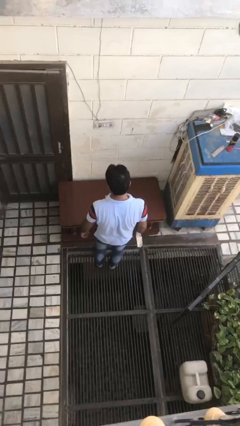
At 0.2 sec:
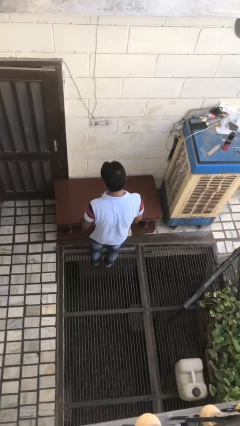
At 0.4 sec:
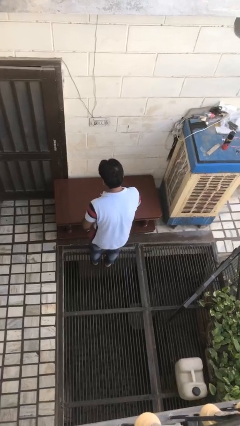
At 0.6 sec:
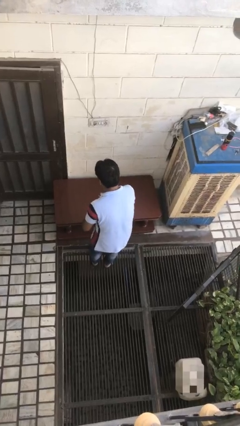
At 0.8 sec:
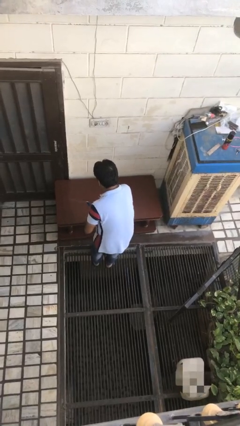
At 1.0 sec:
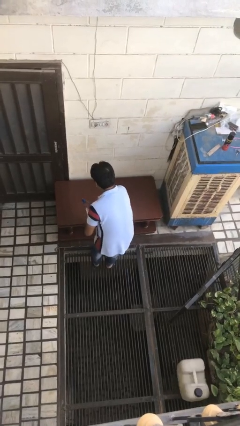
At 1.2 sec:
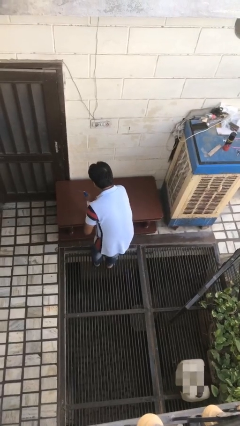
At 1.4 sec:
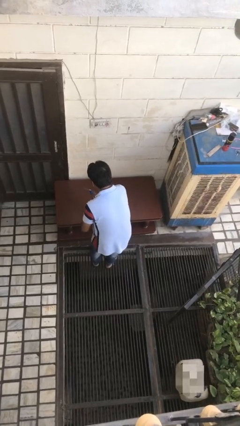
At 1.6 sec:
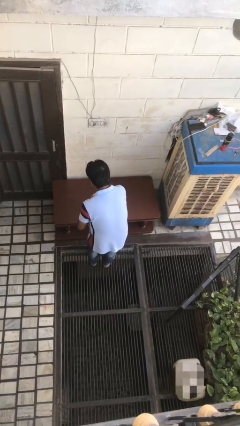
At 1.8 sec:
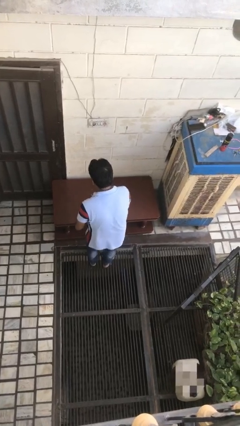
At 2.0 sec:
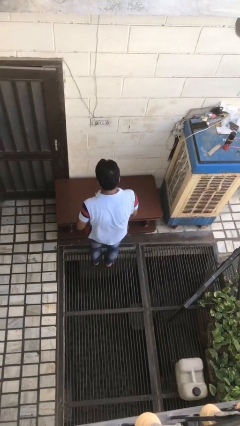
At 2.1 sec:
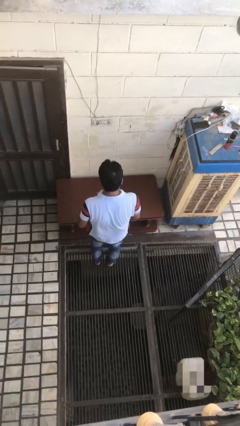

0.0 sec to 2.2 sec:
person sprays from bottle

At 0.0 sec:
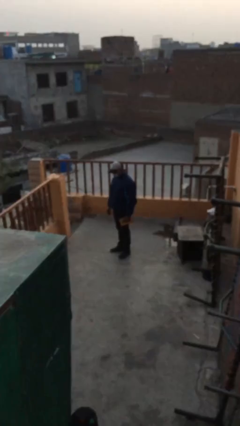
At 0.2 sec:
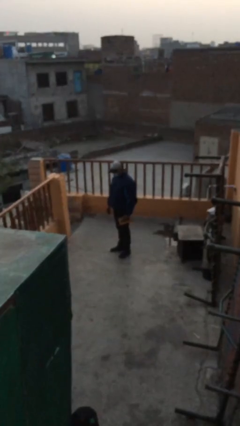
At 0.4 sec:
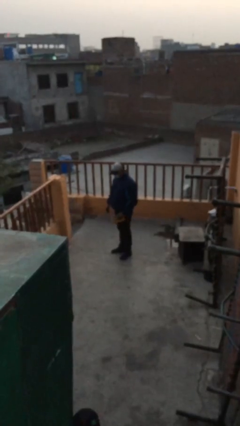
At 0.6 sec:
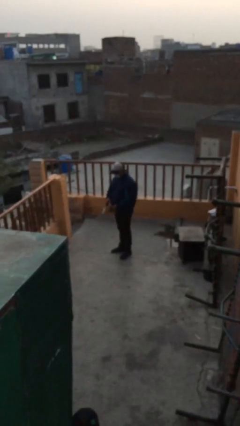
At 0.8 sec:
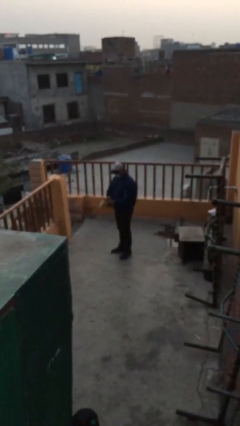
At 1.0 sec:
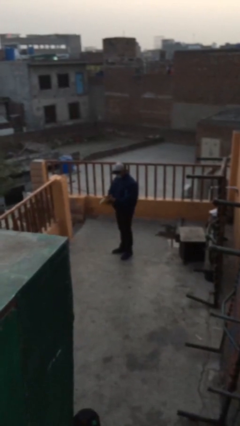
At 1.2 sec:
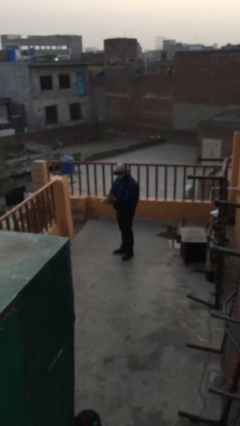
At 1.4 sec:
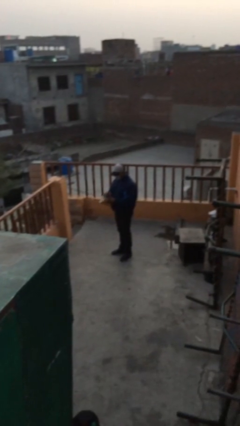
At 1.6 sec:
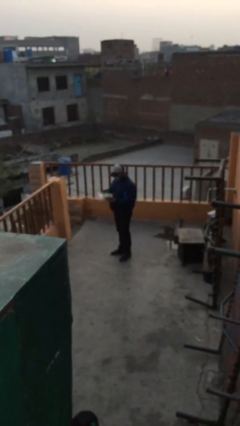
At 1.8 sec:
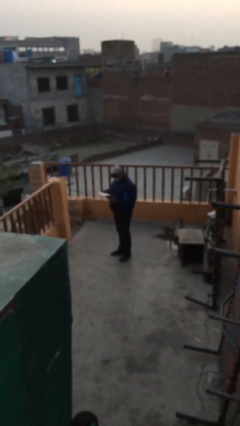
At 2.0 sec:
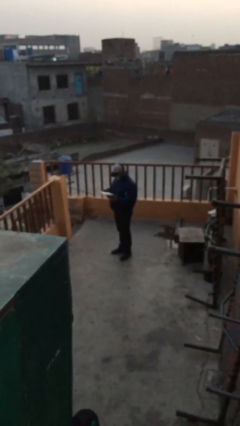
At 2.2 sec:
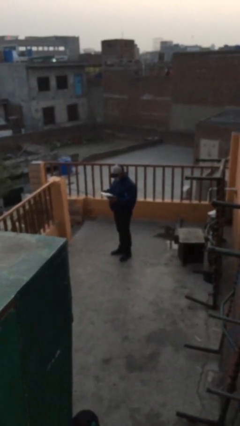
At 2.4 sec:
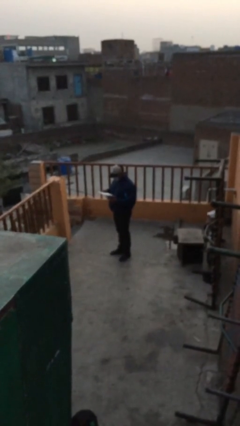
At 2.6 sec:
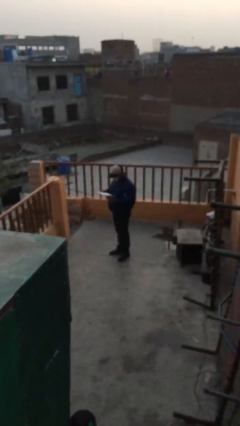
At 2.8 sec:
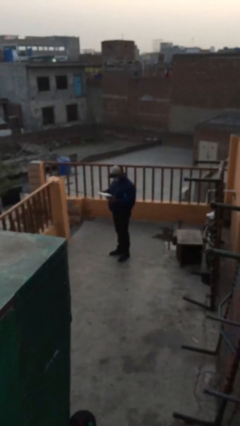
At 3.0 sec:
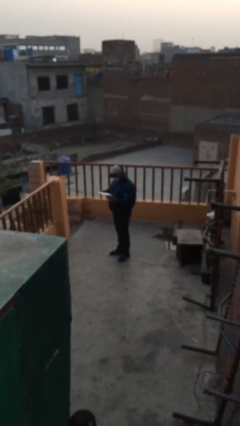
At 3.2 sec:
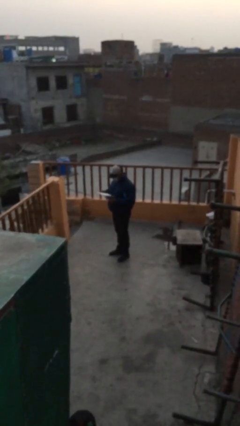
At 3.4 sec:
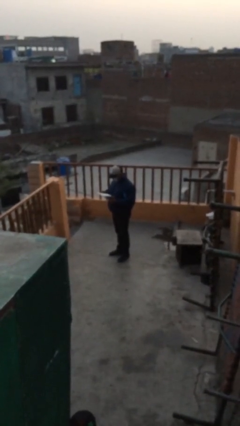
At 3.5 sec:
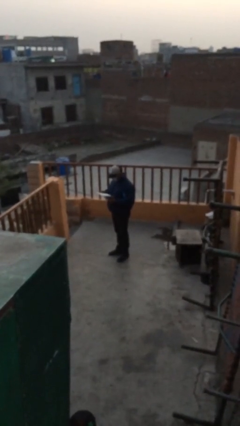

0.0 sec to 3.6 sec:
person reads document

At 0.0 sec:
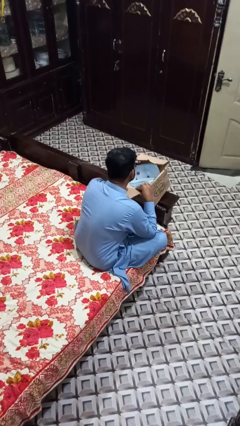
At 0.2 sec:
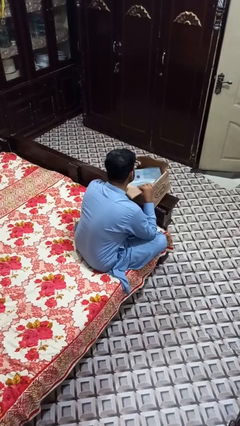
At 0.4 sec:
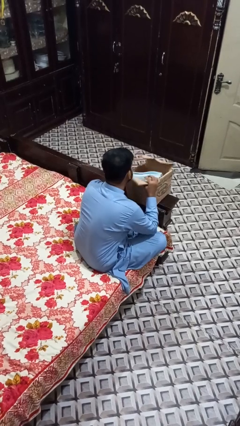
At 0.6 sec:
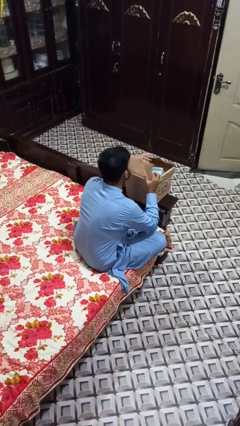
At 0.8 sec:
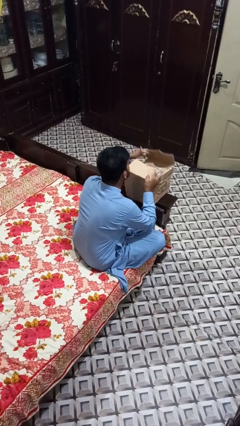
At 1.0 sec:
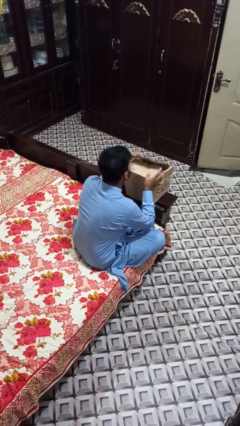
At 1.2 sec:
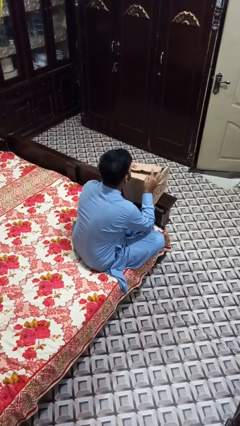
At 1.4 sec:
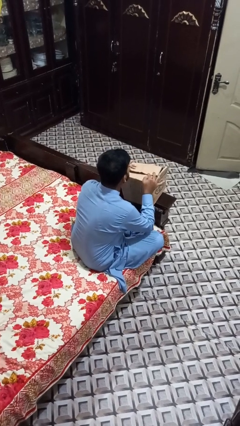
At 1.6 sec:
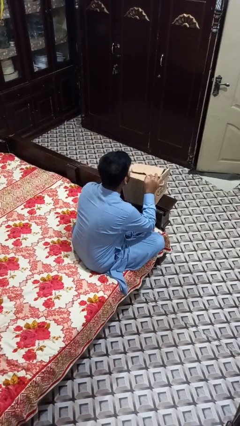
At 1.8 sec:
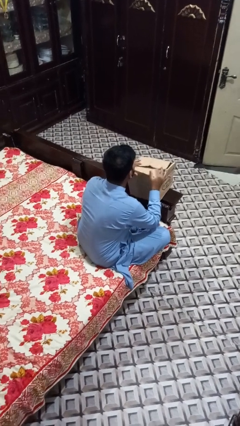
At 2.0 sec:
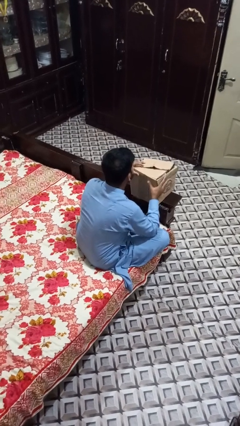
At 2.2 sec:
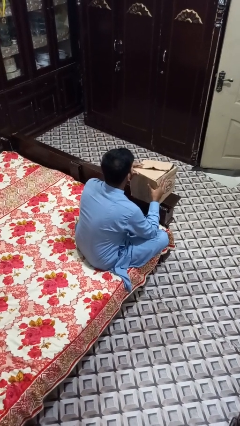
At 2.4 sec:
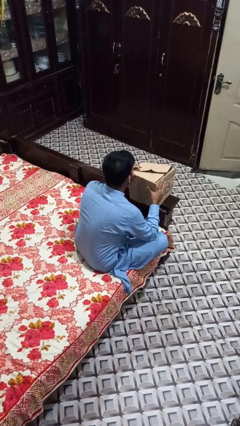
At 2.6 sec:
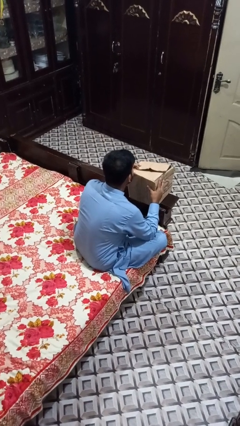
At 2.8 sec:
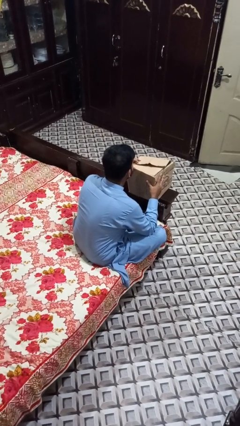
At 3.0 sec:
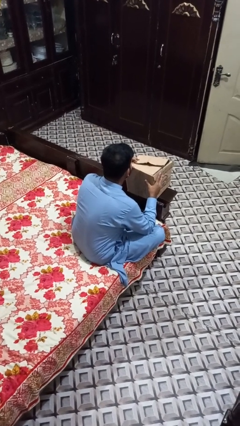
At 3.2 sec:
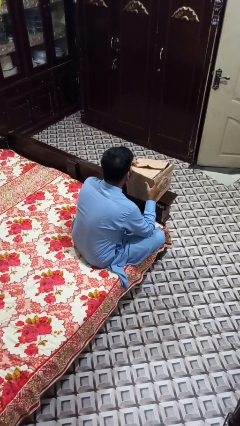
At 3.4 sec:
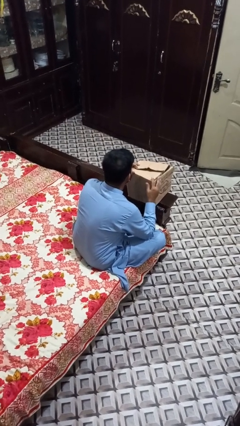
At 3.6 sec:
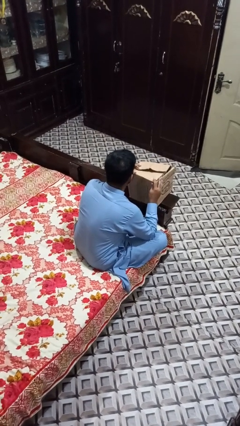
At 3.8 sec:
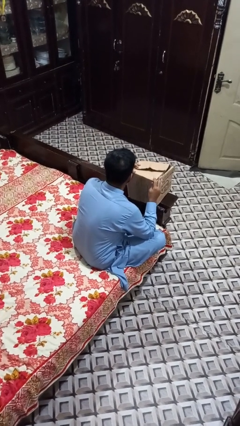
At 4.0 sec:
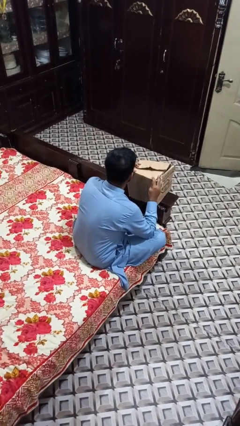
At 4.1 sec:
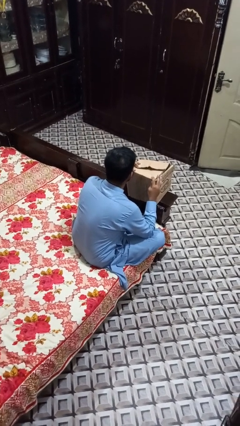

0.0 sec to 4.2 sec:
person closes box

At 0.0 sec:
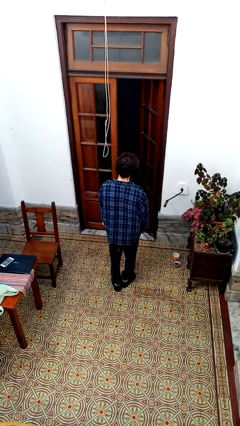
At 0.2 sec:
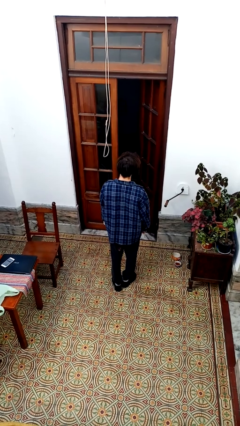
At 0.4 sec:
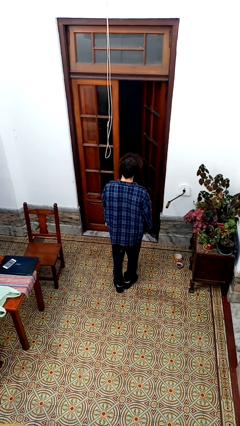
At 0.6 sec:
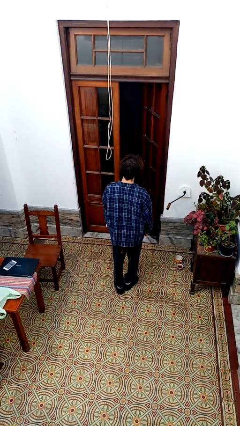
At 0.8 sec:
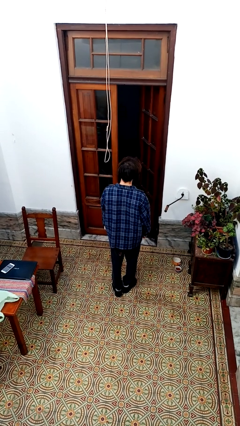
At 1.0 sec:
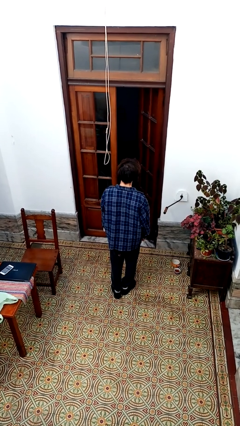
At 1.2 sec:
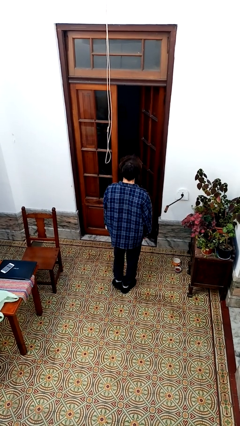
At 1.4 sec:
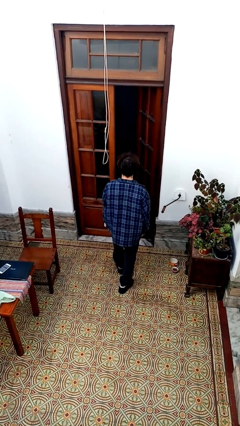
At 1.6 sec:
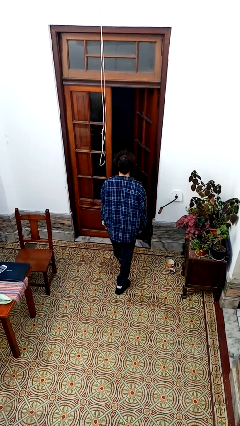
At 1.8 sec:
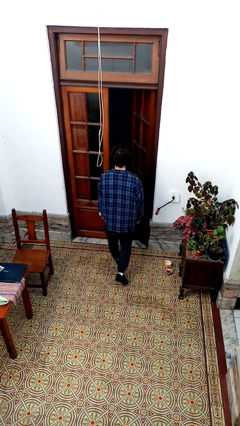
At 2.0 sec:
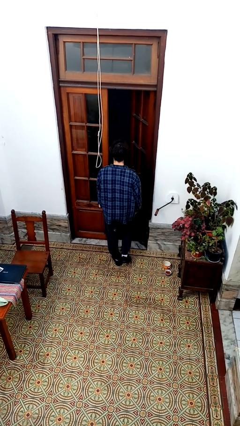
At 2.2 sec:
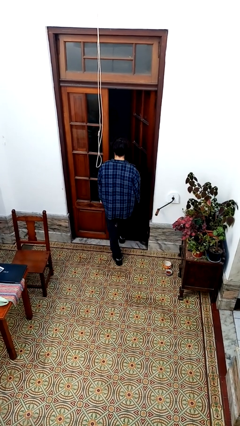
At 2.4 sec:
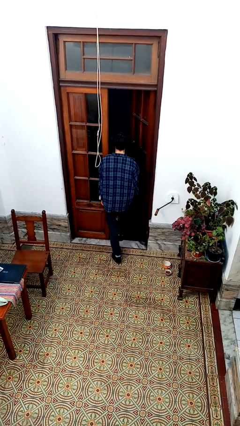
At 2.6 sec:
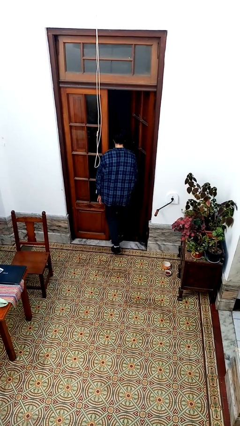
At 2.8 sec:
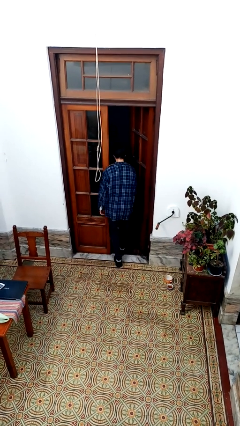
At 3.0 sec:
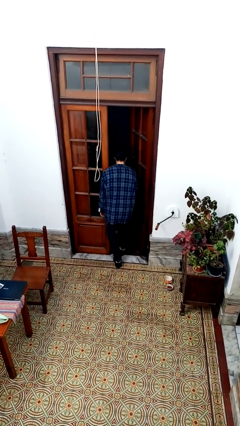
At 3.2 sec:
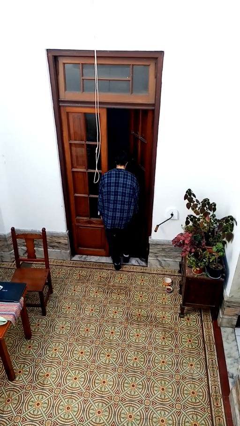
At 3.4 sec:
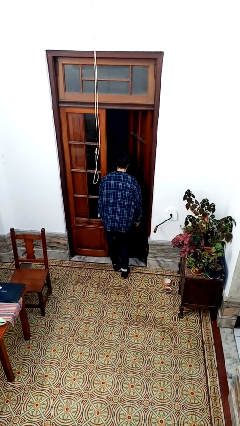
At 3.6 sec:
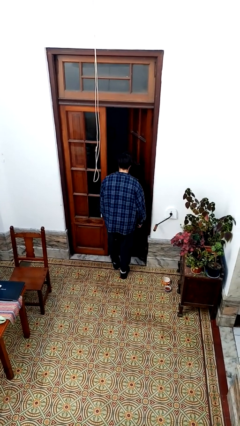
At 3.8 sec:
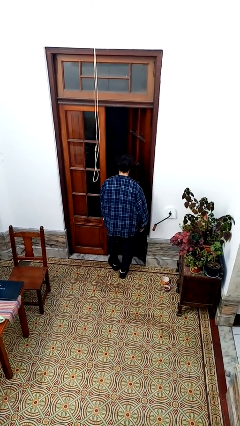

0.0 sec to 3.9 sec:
person bumps into wall

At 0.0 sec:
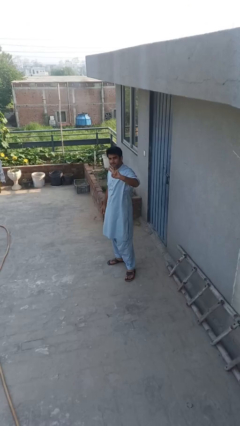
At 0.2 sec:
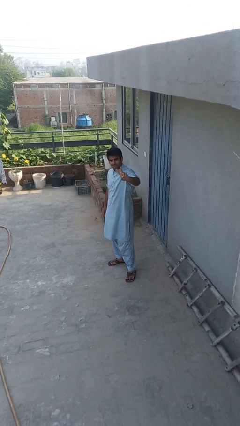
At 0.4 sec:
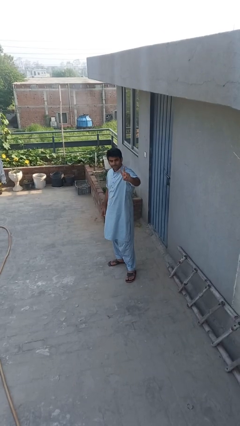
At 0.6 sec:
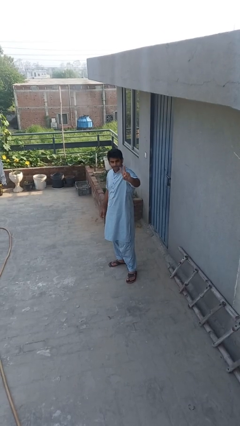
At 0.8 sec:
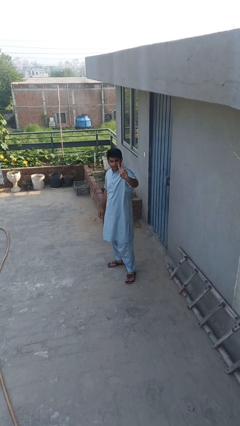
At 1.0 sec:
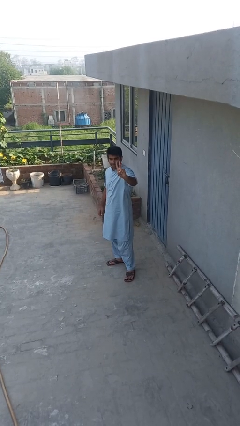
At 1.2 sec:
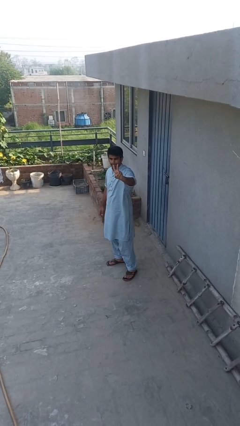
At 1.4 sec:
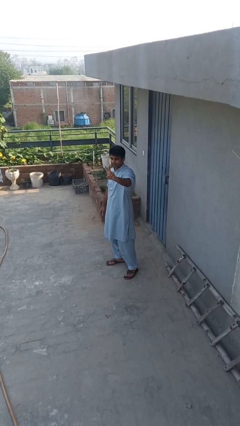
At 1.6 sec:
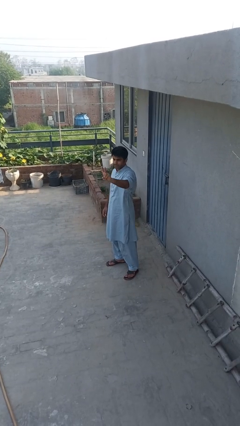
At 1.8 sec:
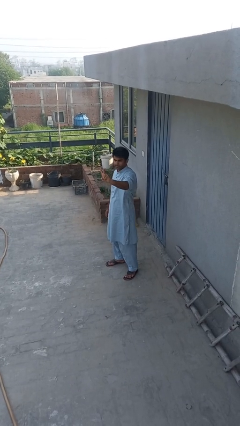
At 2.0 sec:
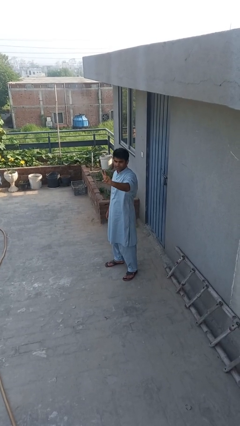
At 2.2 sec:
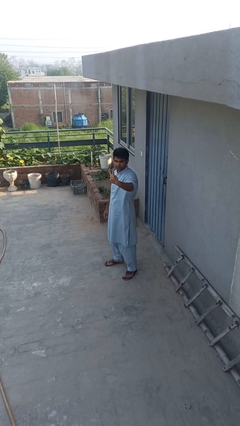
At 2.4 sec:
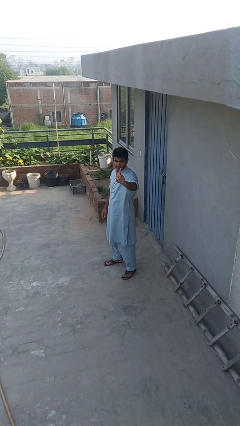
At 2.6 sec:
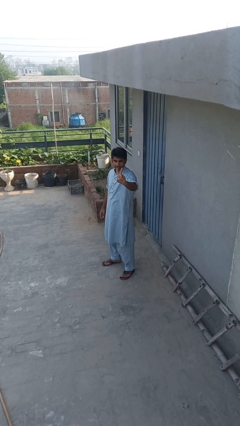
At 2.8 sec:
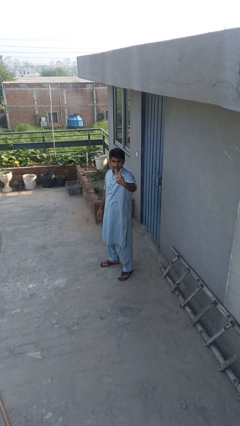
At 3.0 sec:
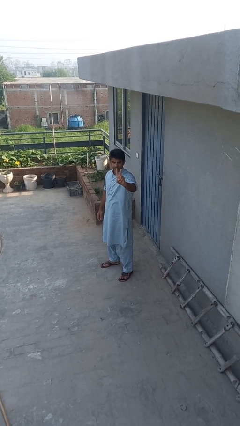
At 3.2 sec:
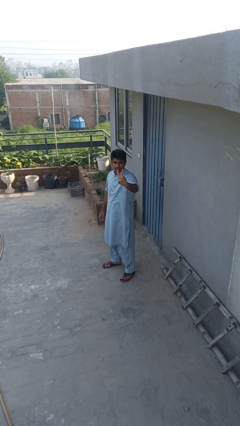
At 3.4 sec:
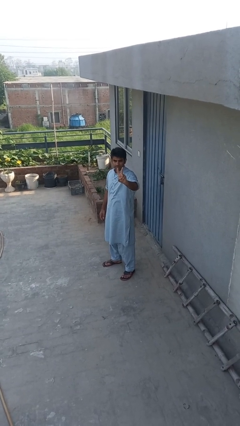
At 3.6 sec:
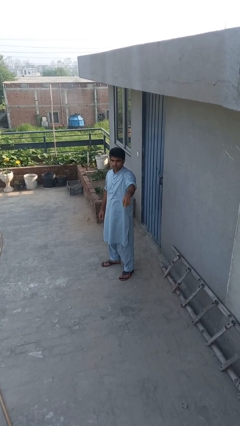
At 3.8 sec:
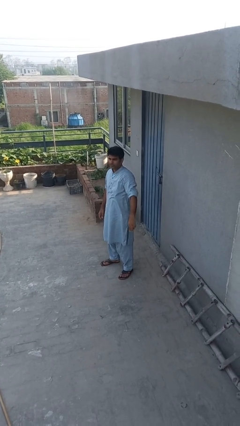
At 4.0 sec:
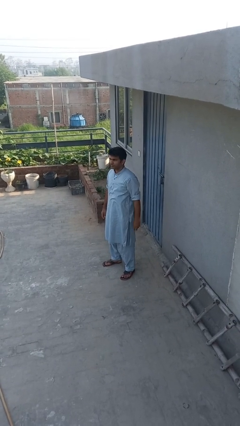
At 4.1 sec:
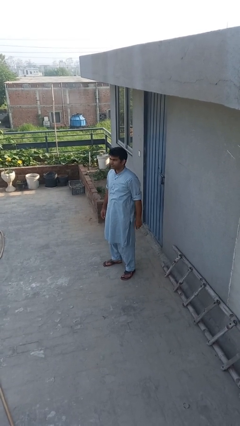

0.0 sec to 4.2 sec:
person gestures peace
